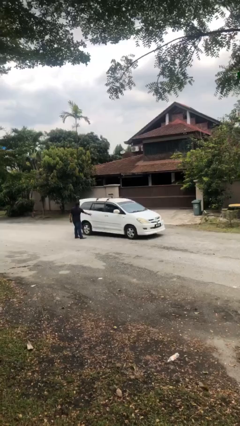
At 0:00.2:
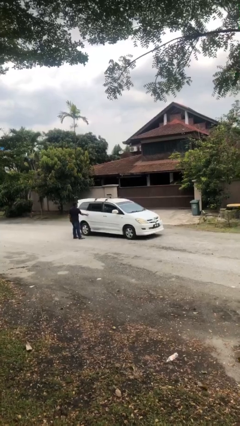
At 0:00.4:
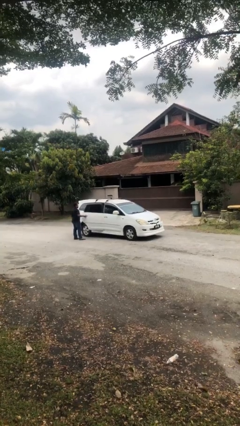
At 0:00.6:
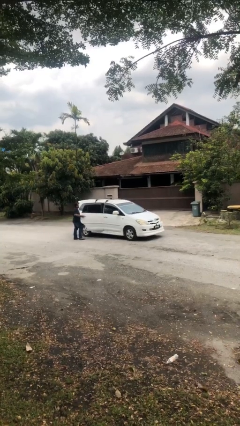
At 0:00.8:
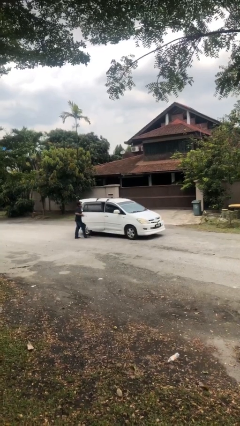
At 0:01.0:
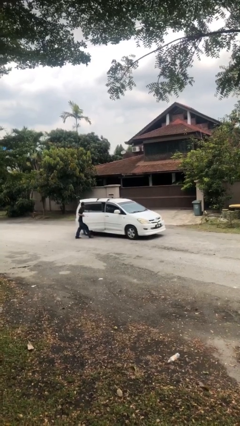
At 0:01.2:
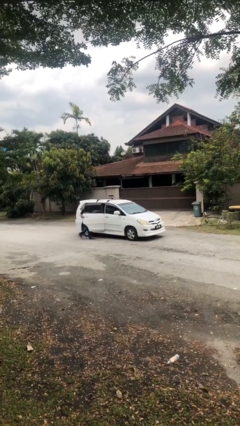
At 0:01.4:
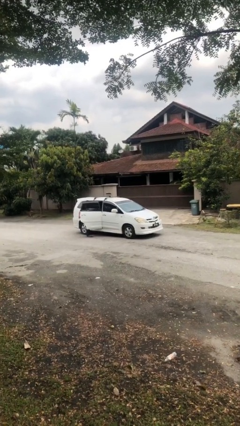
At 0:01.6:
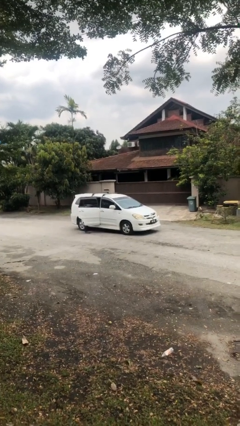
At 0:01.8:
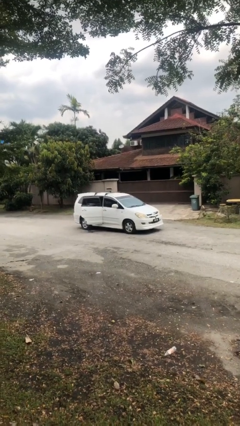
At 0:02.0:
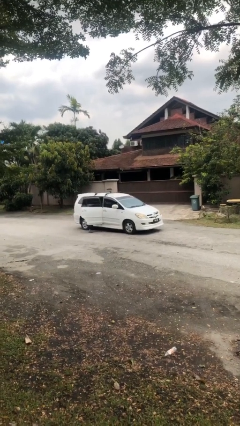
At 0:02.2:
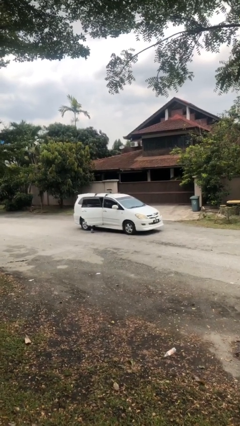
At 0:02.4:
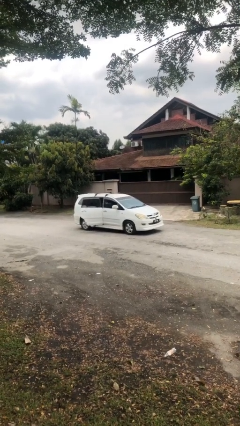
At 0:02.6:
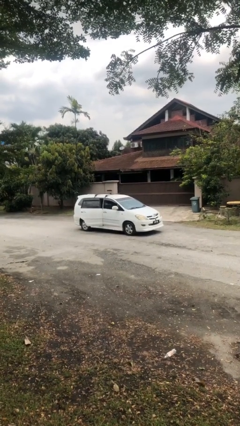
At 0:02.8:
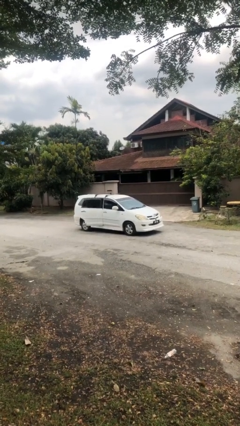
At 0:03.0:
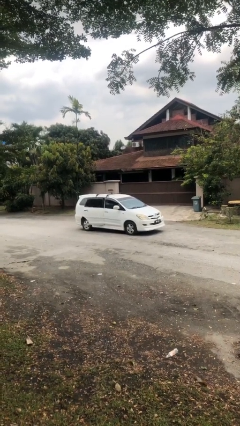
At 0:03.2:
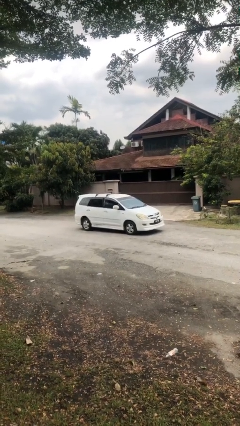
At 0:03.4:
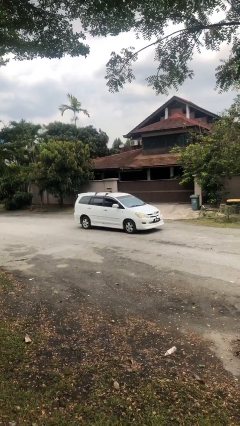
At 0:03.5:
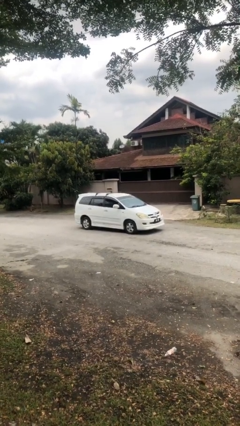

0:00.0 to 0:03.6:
car picks up person

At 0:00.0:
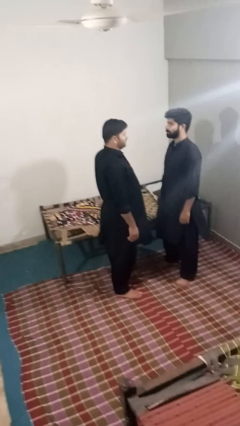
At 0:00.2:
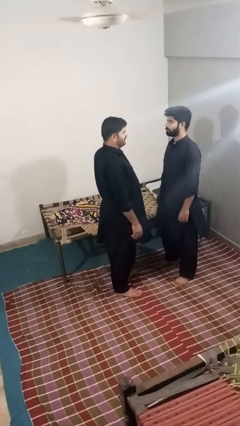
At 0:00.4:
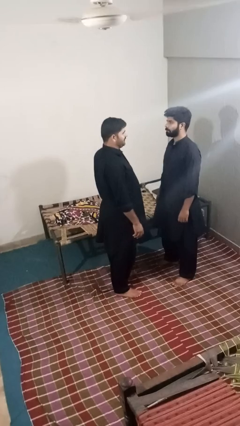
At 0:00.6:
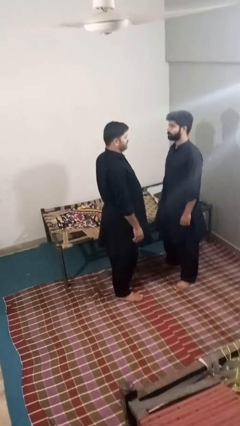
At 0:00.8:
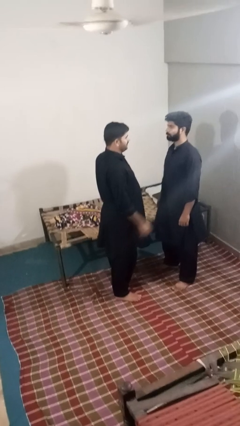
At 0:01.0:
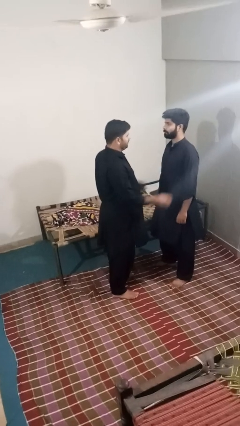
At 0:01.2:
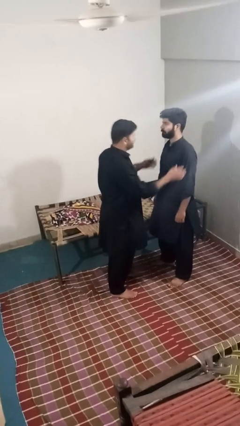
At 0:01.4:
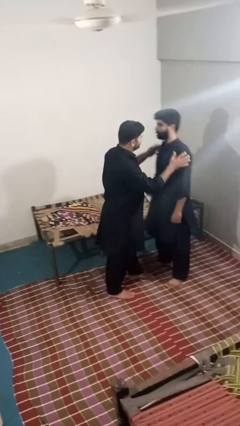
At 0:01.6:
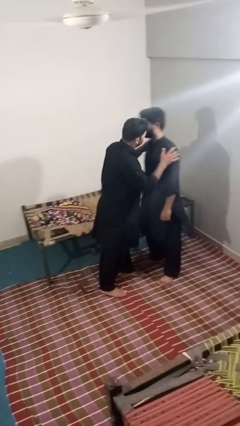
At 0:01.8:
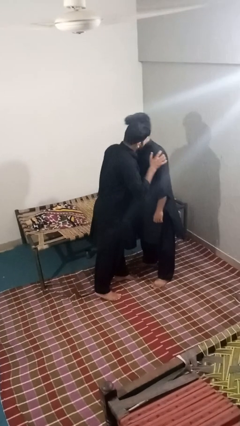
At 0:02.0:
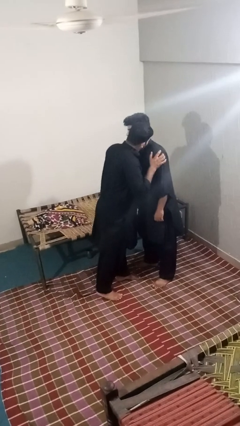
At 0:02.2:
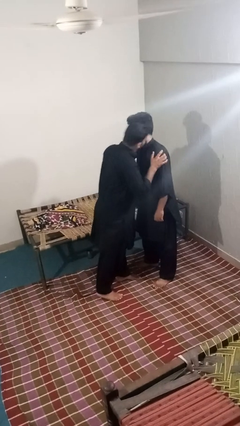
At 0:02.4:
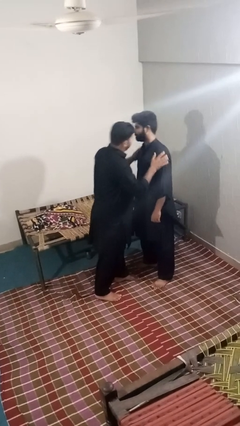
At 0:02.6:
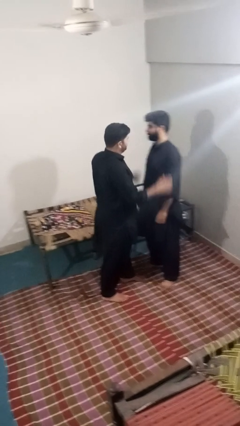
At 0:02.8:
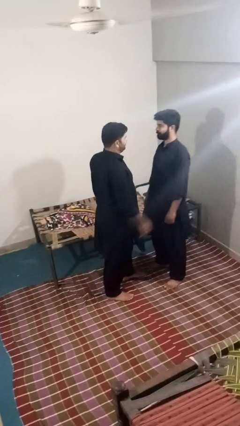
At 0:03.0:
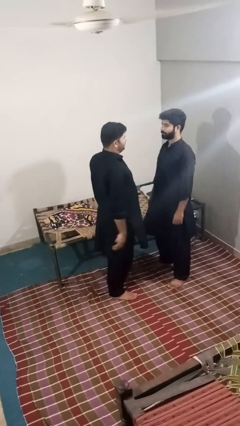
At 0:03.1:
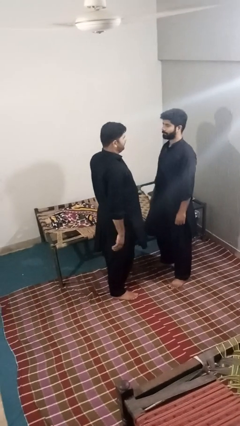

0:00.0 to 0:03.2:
person kisses cheek of person

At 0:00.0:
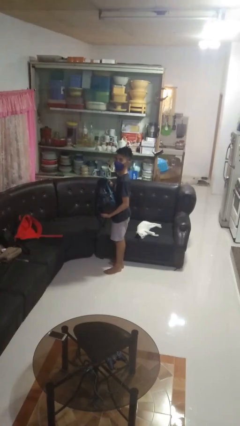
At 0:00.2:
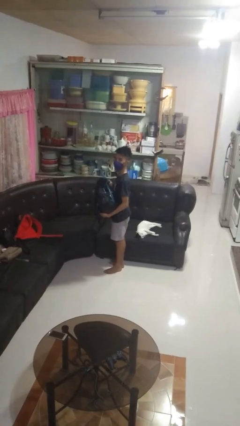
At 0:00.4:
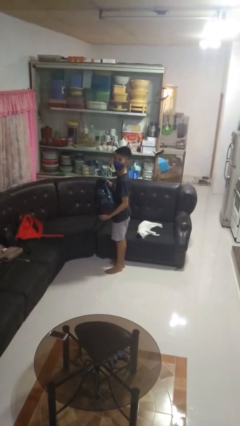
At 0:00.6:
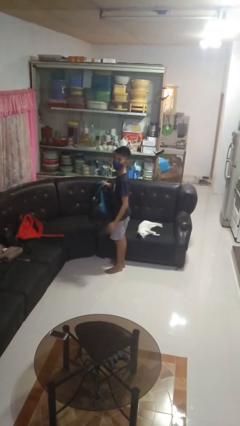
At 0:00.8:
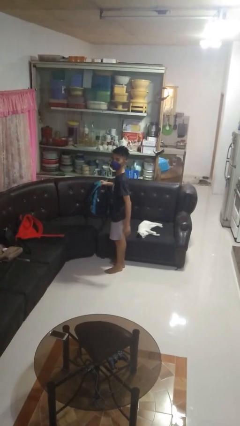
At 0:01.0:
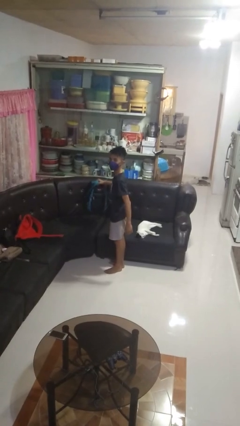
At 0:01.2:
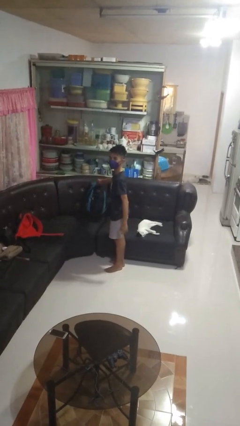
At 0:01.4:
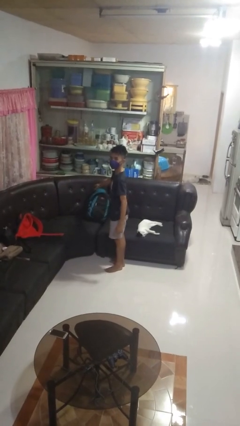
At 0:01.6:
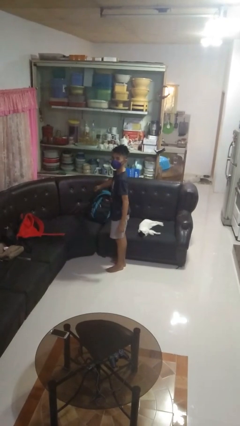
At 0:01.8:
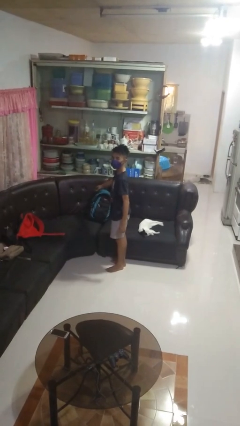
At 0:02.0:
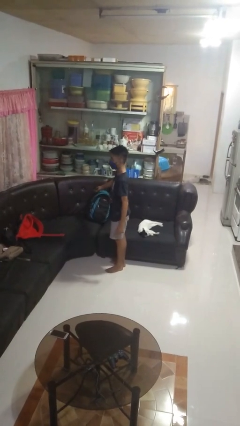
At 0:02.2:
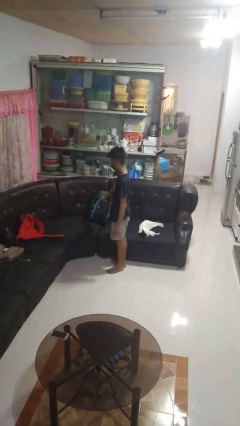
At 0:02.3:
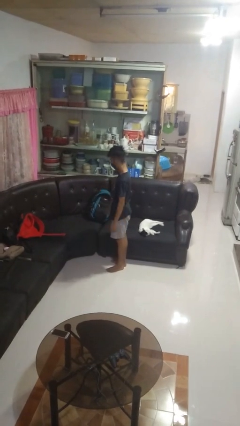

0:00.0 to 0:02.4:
person puts down object on couch

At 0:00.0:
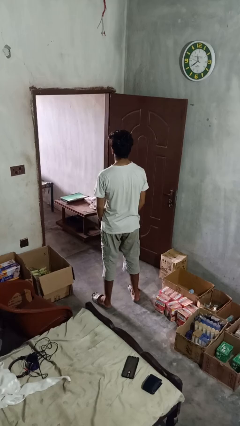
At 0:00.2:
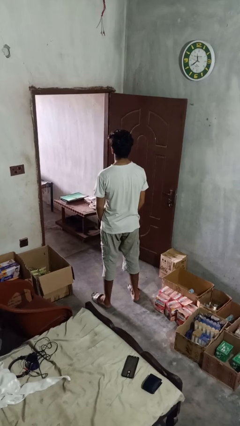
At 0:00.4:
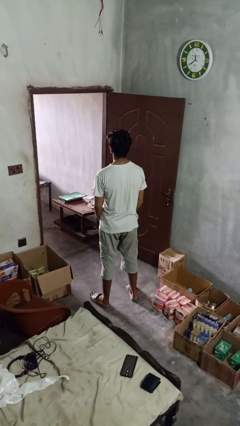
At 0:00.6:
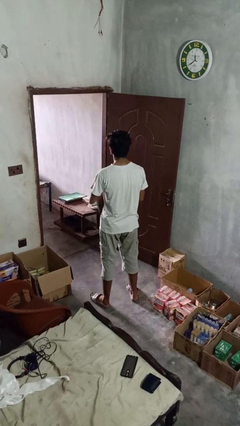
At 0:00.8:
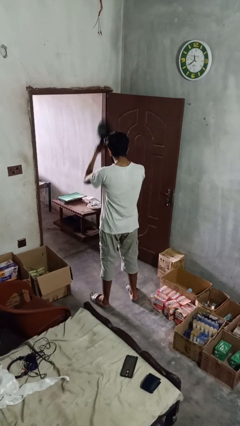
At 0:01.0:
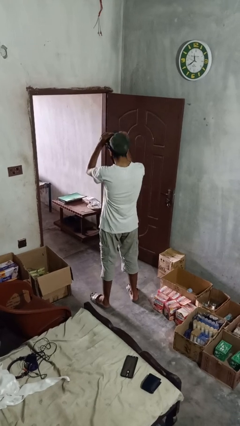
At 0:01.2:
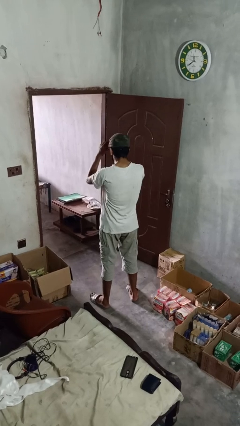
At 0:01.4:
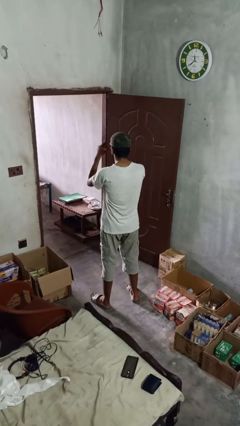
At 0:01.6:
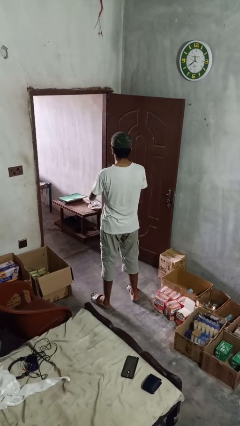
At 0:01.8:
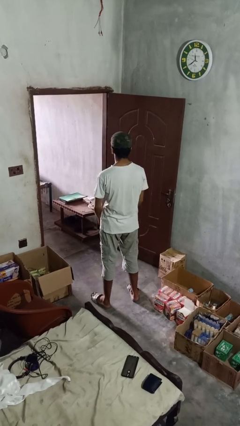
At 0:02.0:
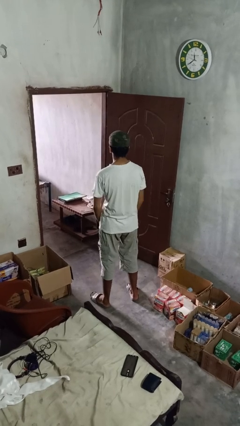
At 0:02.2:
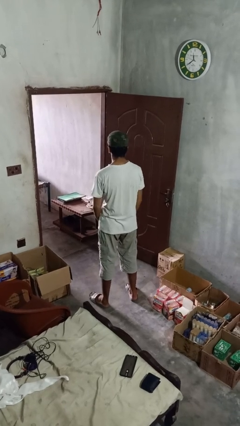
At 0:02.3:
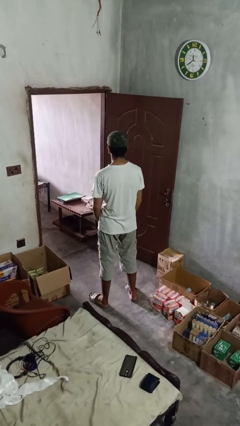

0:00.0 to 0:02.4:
person puts on hat

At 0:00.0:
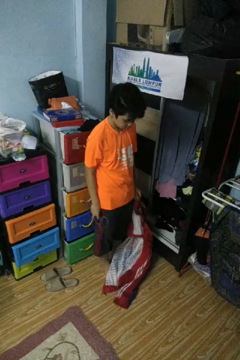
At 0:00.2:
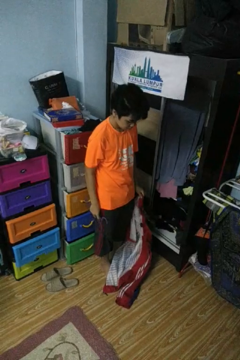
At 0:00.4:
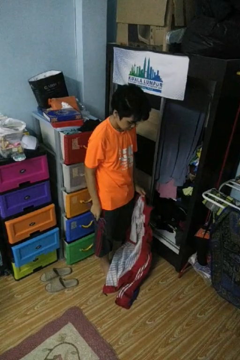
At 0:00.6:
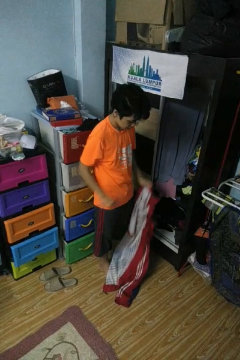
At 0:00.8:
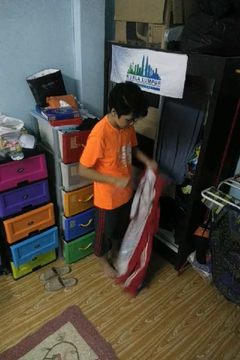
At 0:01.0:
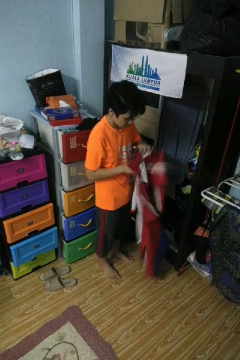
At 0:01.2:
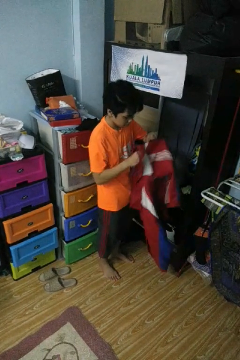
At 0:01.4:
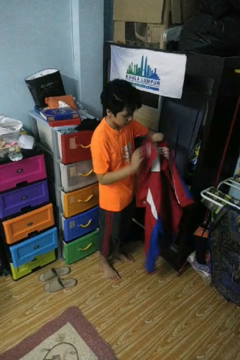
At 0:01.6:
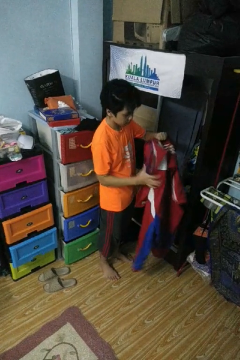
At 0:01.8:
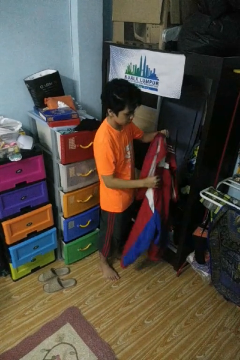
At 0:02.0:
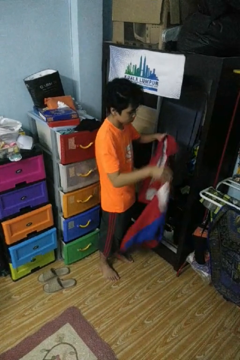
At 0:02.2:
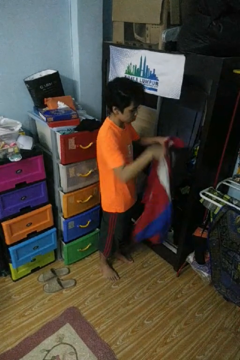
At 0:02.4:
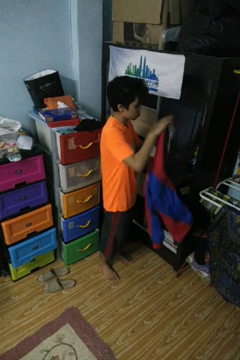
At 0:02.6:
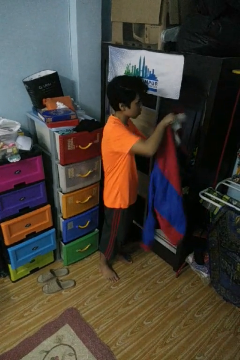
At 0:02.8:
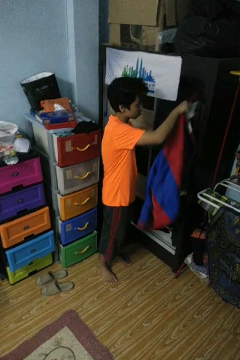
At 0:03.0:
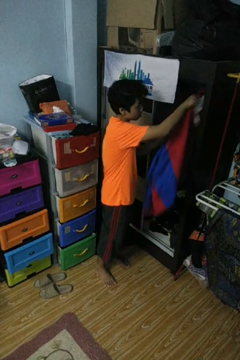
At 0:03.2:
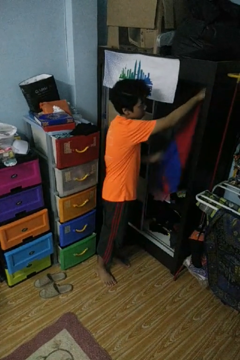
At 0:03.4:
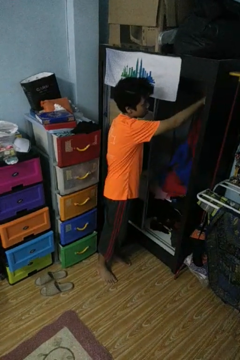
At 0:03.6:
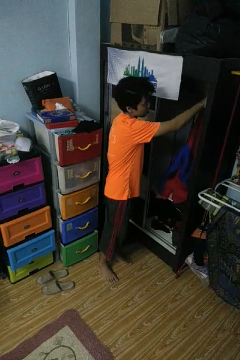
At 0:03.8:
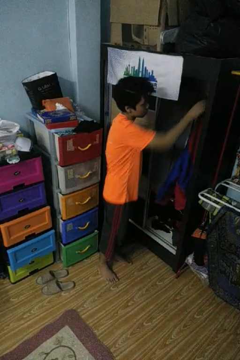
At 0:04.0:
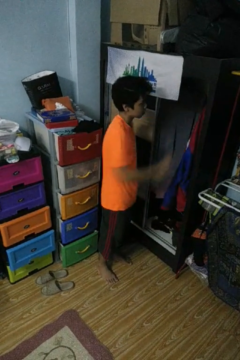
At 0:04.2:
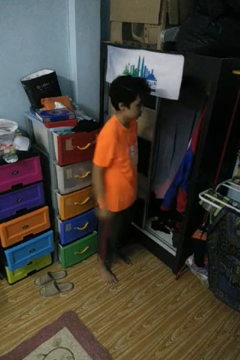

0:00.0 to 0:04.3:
person puts clothes into closet

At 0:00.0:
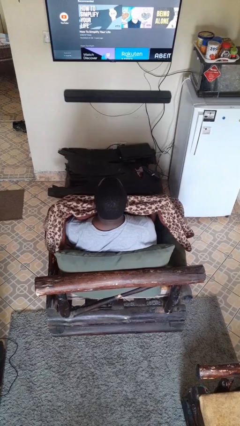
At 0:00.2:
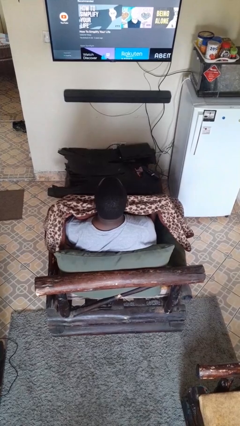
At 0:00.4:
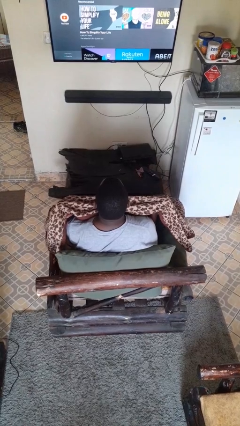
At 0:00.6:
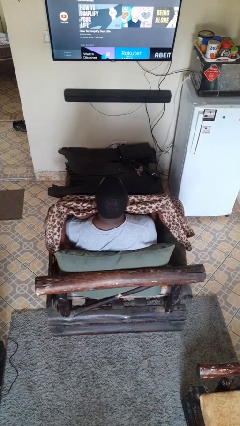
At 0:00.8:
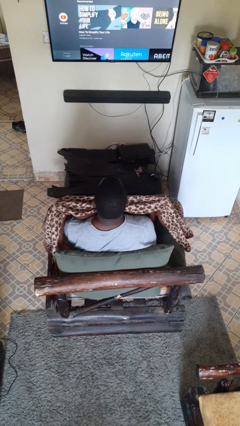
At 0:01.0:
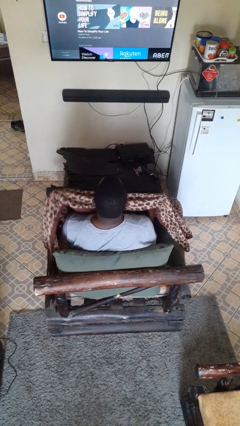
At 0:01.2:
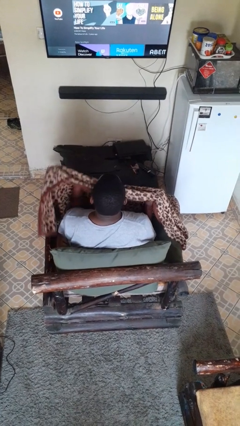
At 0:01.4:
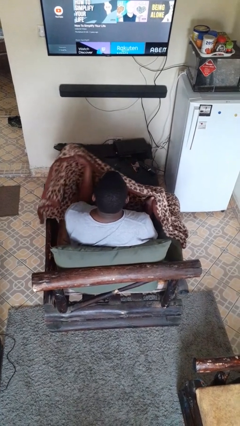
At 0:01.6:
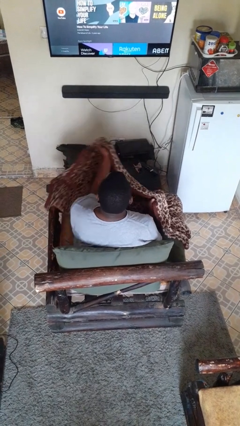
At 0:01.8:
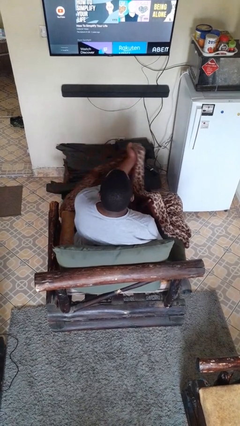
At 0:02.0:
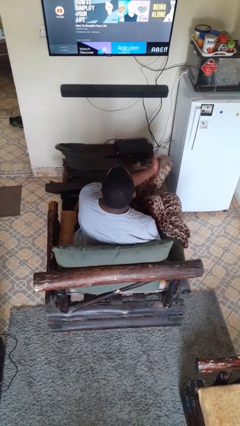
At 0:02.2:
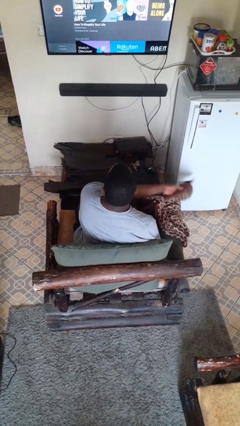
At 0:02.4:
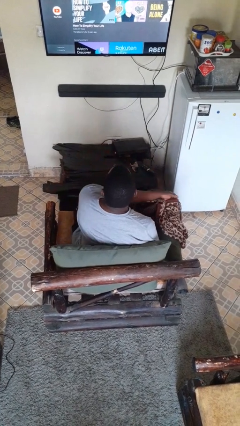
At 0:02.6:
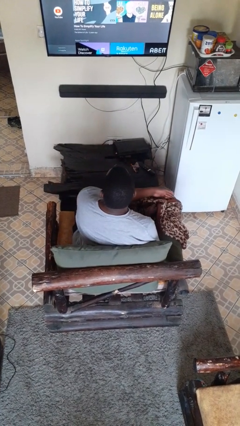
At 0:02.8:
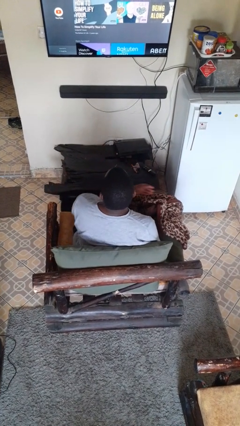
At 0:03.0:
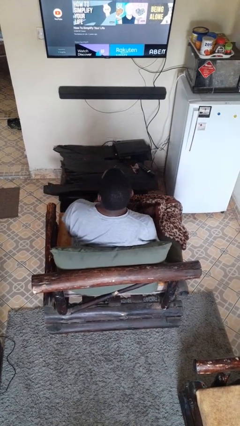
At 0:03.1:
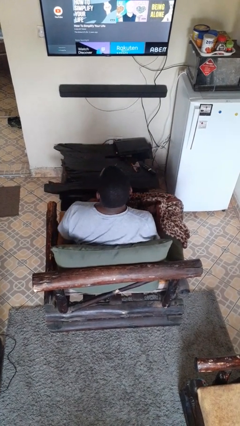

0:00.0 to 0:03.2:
person uncovers with blanket
